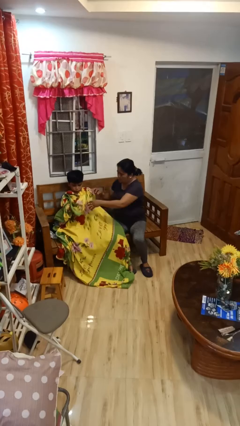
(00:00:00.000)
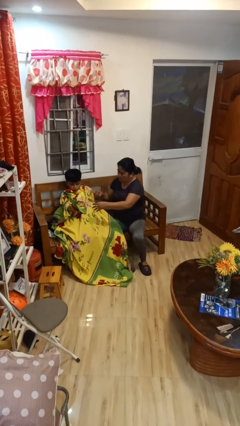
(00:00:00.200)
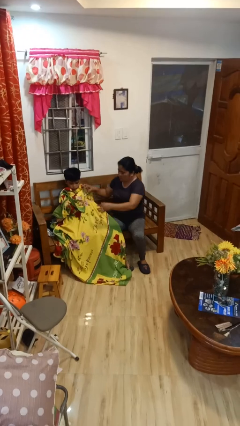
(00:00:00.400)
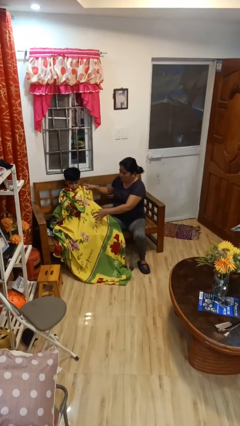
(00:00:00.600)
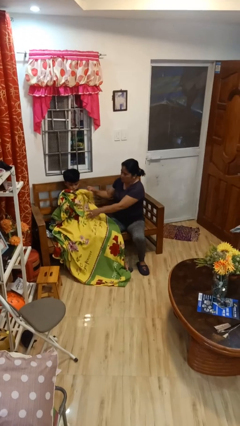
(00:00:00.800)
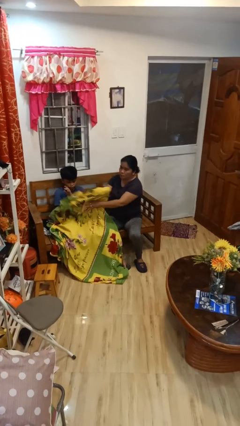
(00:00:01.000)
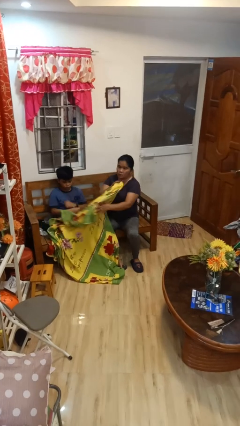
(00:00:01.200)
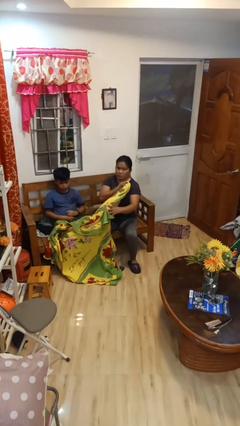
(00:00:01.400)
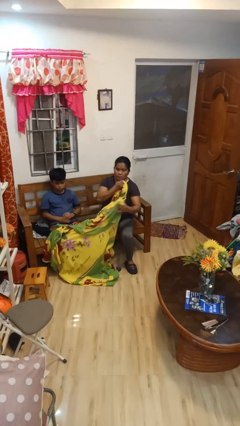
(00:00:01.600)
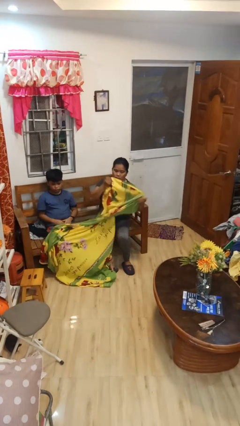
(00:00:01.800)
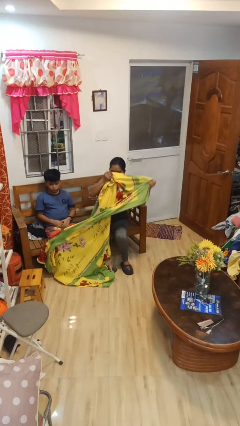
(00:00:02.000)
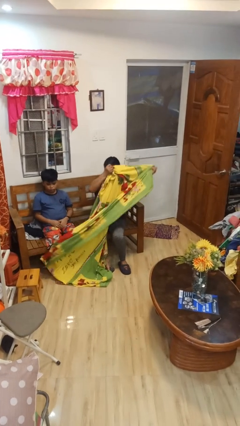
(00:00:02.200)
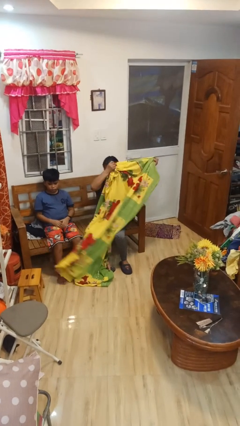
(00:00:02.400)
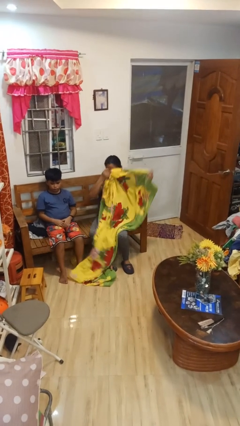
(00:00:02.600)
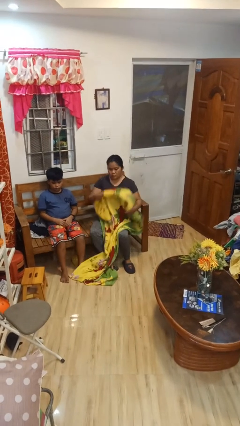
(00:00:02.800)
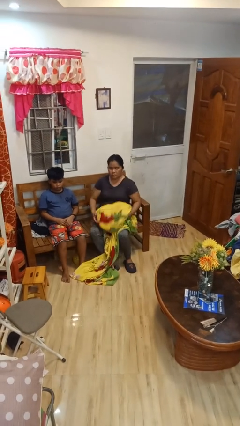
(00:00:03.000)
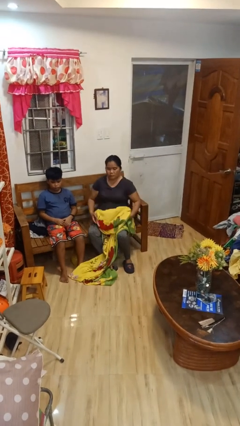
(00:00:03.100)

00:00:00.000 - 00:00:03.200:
person uncovers friend with blanket

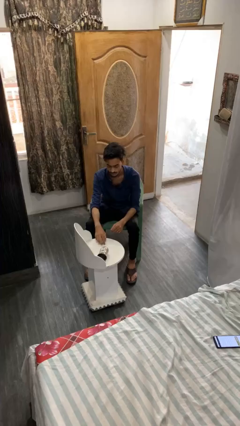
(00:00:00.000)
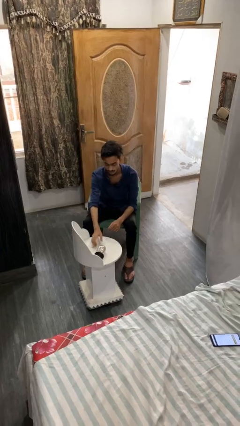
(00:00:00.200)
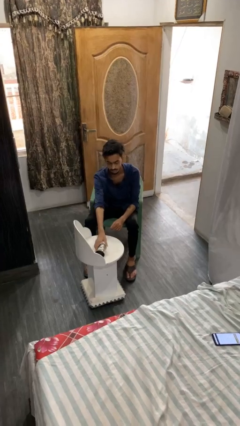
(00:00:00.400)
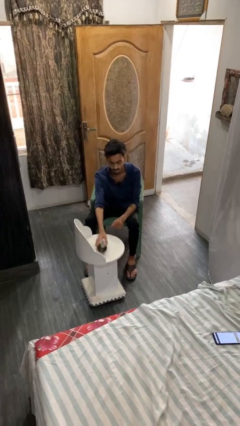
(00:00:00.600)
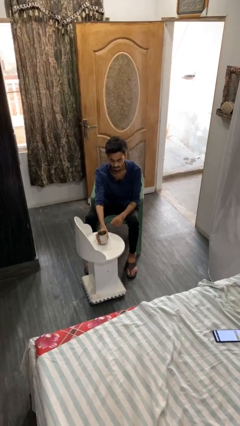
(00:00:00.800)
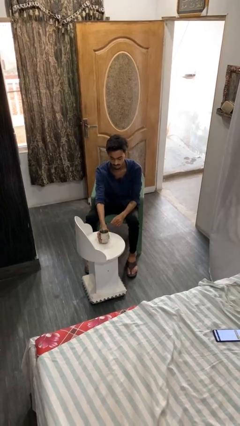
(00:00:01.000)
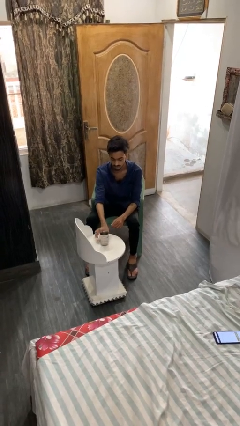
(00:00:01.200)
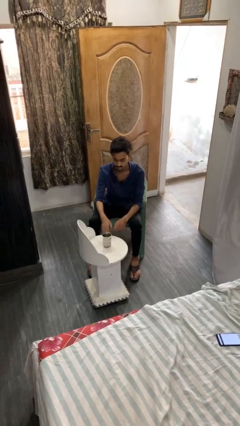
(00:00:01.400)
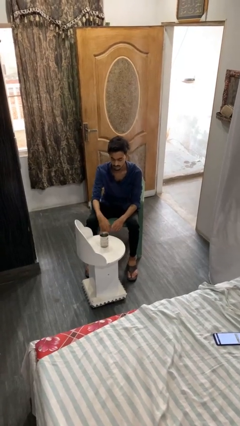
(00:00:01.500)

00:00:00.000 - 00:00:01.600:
person sets upright glass

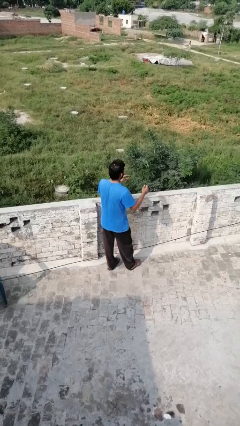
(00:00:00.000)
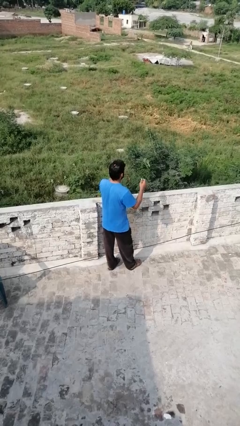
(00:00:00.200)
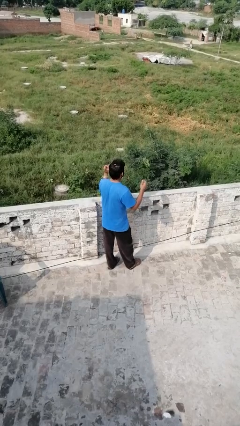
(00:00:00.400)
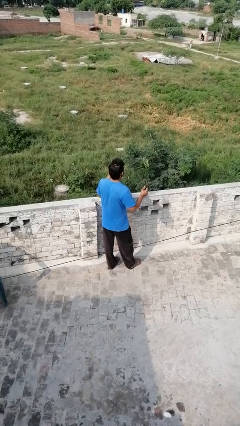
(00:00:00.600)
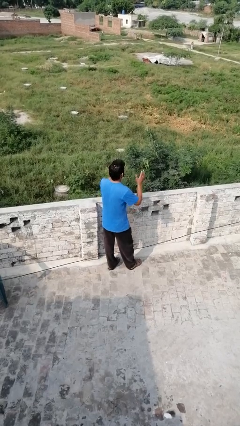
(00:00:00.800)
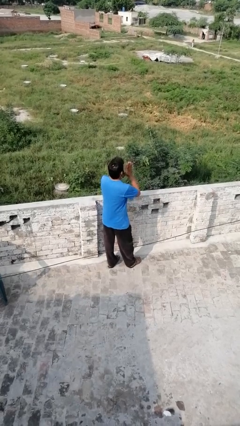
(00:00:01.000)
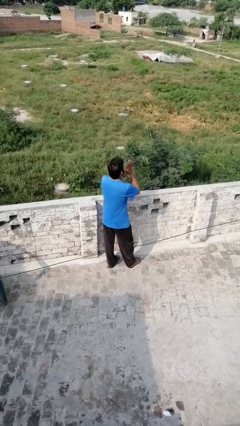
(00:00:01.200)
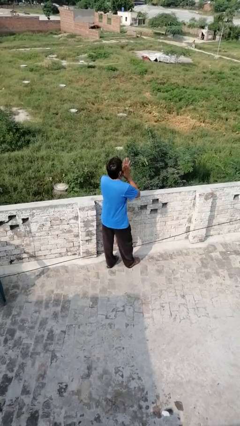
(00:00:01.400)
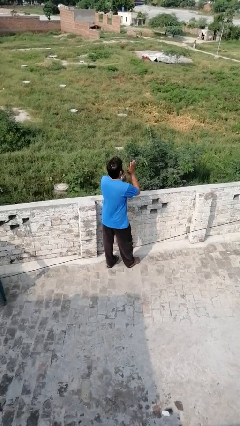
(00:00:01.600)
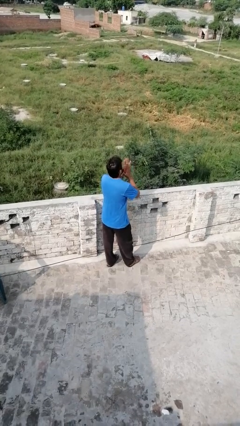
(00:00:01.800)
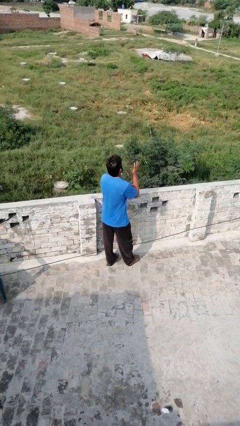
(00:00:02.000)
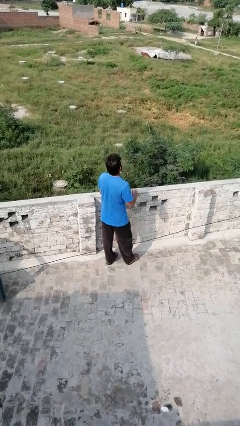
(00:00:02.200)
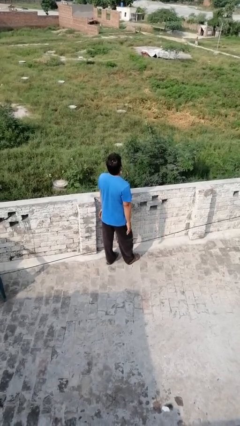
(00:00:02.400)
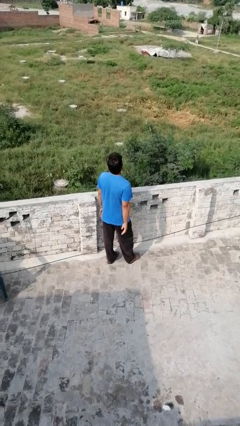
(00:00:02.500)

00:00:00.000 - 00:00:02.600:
person blows into hands

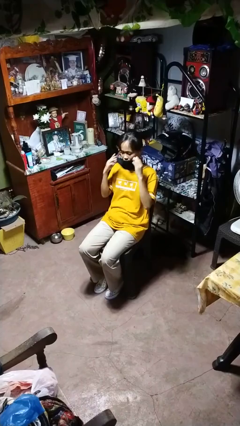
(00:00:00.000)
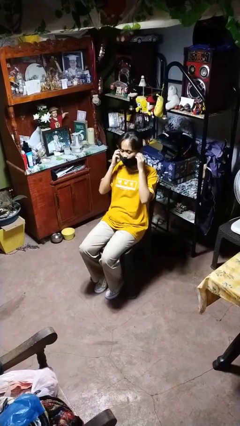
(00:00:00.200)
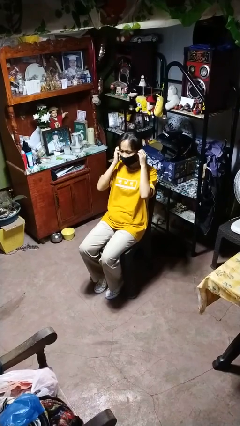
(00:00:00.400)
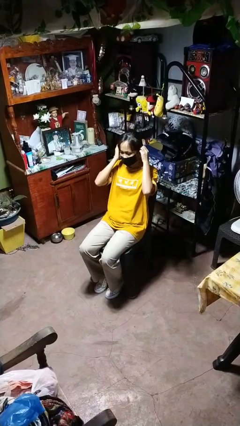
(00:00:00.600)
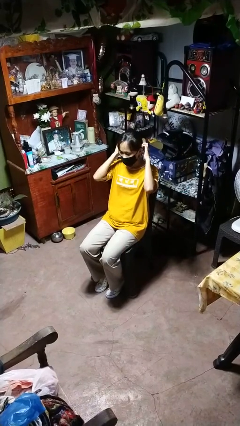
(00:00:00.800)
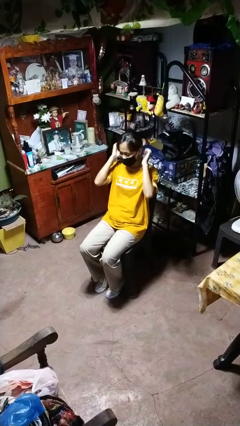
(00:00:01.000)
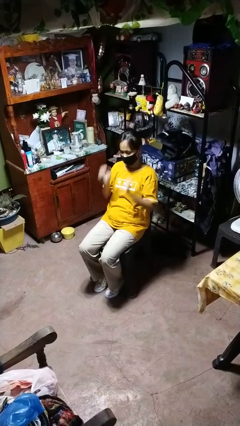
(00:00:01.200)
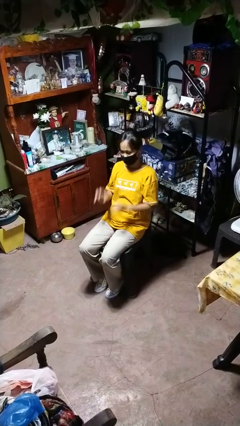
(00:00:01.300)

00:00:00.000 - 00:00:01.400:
person puts on facemask

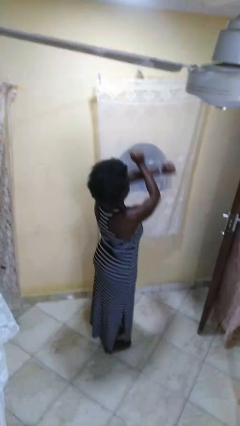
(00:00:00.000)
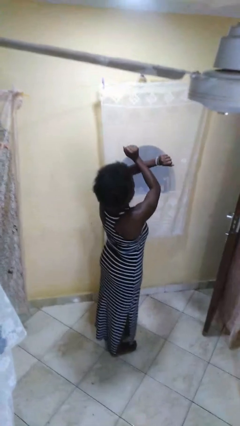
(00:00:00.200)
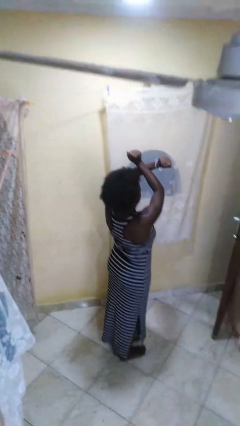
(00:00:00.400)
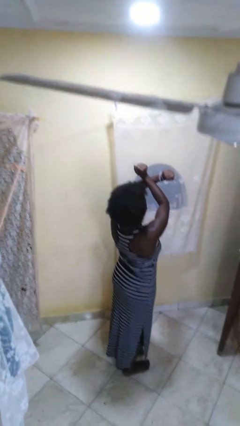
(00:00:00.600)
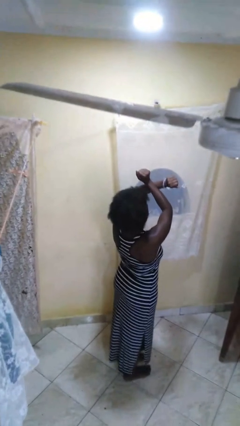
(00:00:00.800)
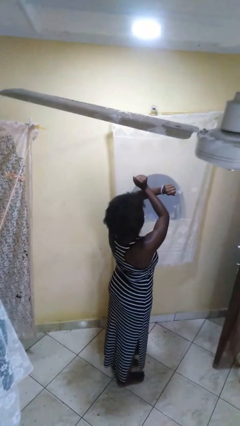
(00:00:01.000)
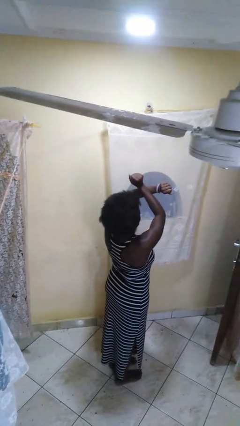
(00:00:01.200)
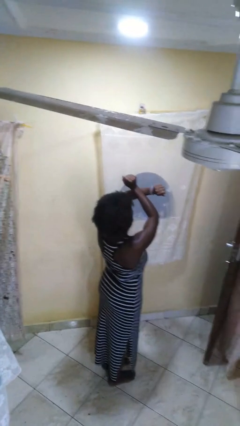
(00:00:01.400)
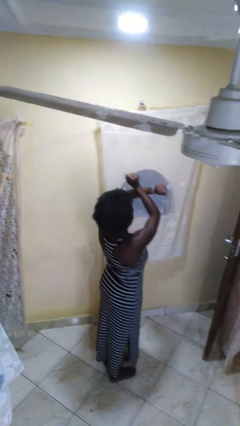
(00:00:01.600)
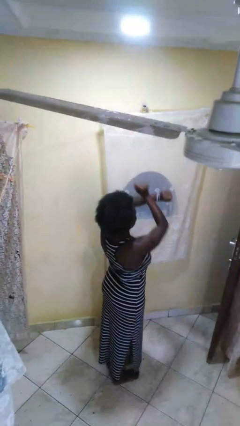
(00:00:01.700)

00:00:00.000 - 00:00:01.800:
person gestures arms x

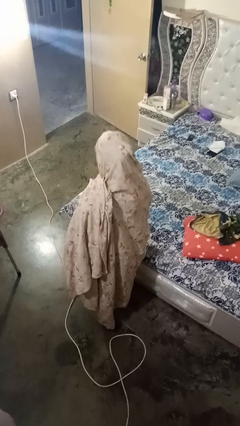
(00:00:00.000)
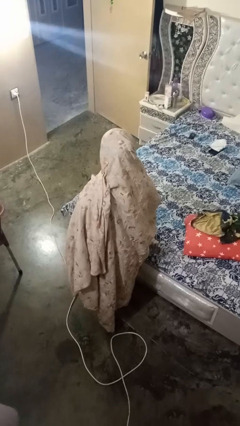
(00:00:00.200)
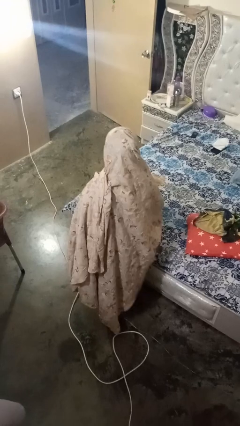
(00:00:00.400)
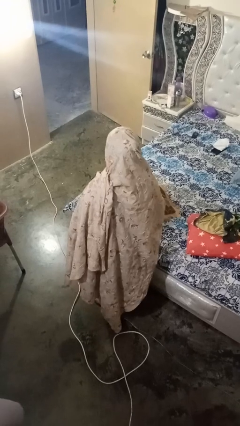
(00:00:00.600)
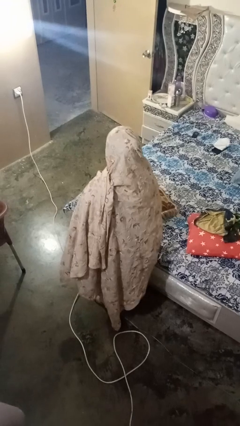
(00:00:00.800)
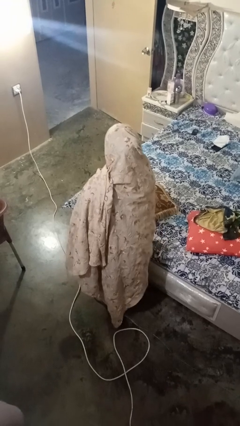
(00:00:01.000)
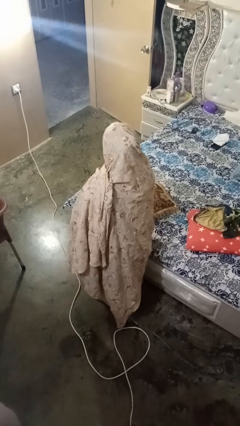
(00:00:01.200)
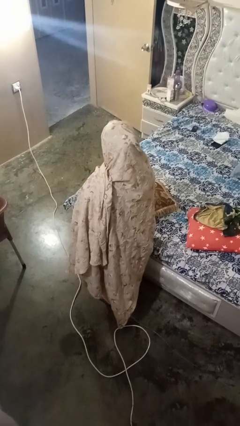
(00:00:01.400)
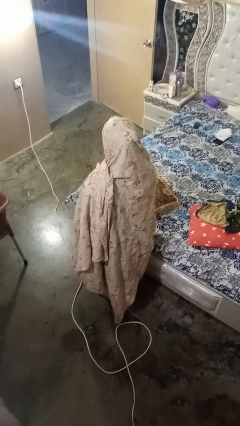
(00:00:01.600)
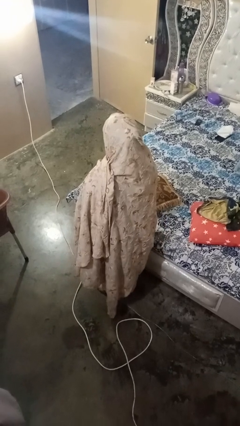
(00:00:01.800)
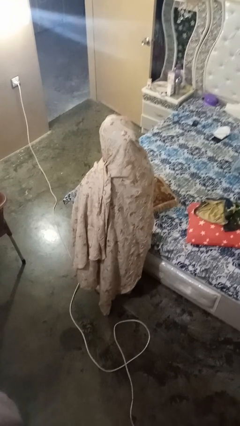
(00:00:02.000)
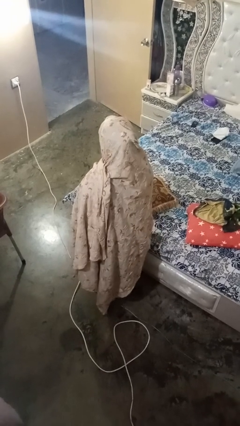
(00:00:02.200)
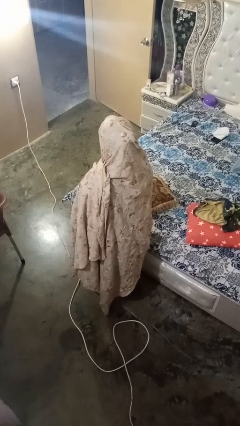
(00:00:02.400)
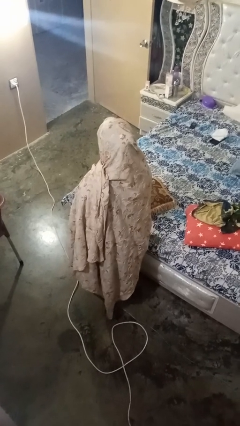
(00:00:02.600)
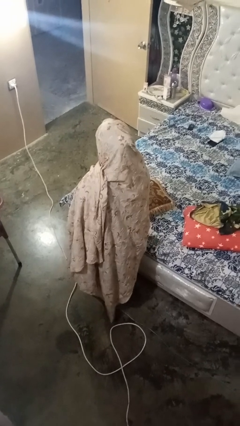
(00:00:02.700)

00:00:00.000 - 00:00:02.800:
person puts down object on bed

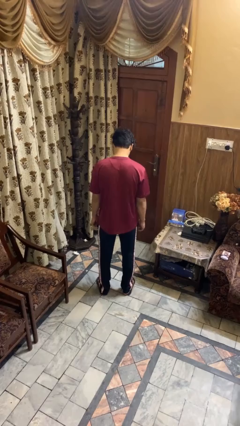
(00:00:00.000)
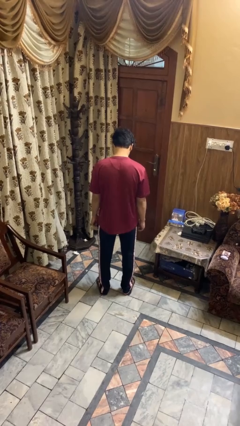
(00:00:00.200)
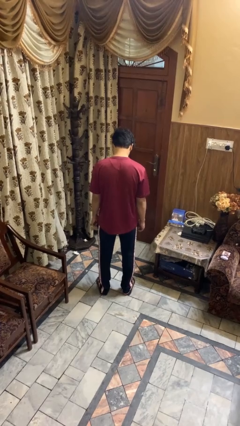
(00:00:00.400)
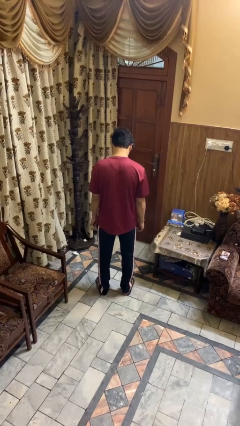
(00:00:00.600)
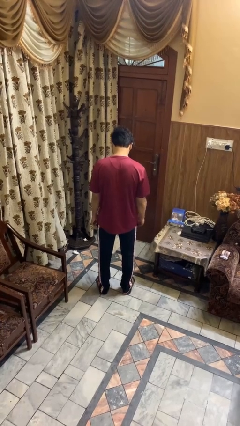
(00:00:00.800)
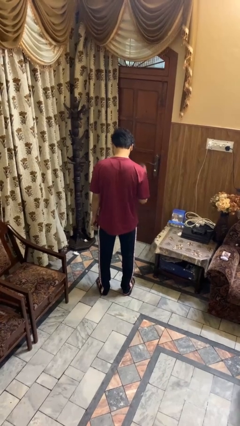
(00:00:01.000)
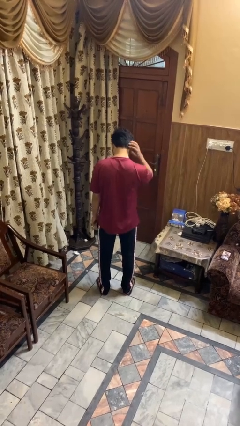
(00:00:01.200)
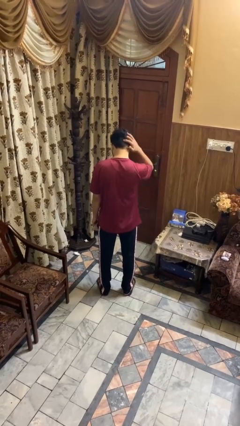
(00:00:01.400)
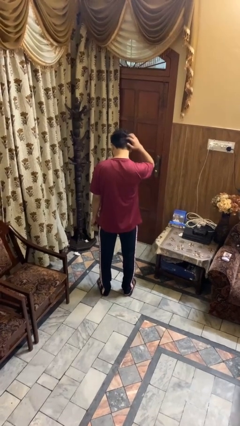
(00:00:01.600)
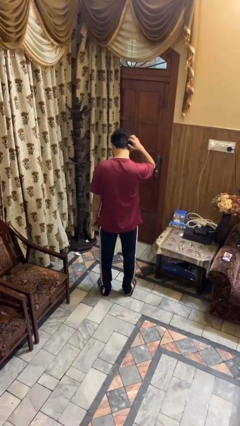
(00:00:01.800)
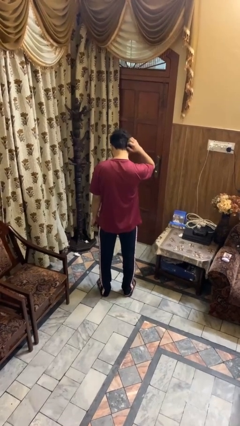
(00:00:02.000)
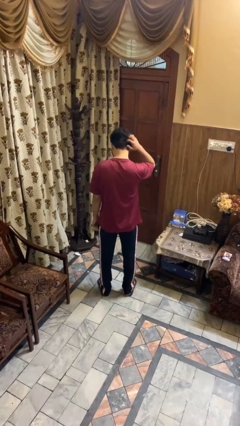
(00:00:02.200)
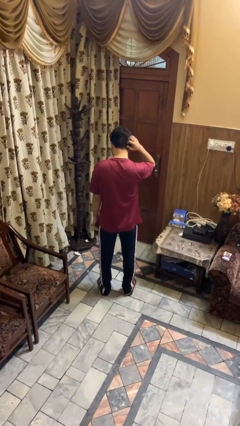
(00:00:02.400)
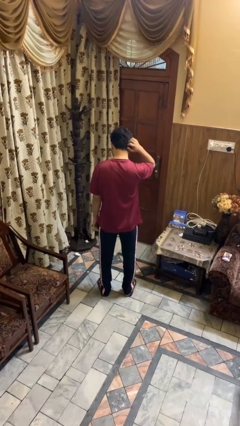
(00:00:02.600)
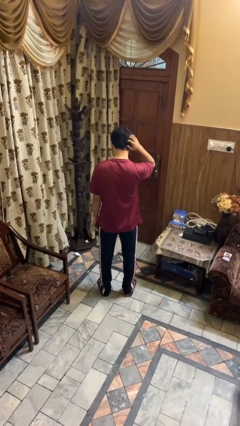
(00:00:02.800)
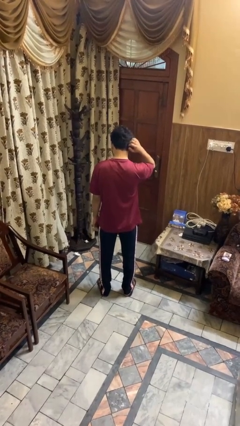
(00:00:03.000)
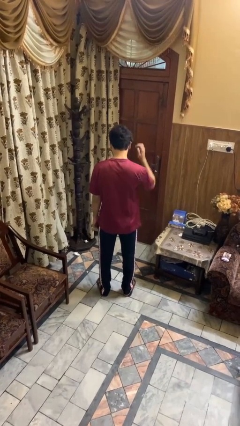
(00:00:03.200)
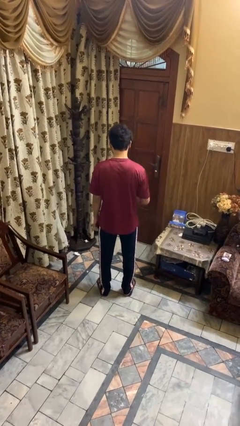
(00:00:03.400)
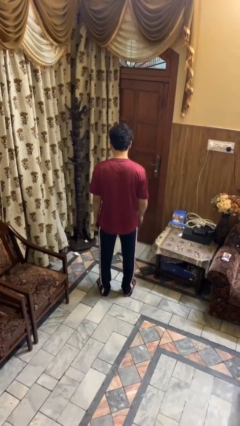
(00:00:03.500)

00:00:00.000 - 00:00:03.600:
person scratches face
